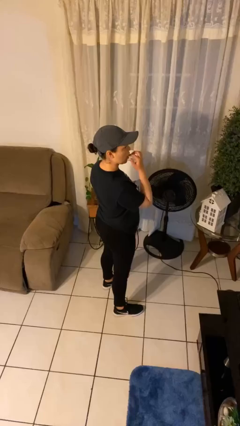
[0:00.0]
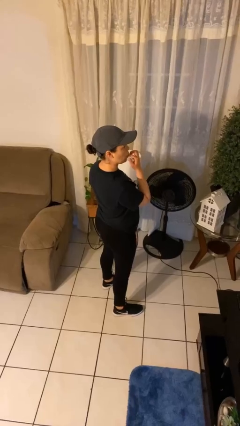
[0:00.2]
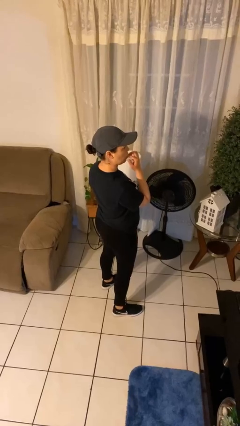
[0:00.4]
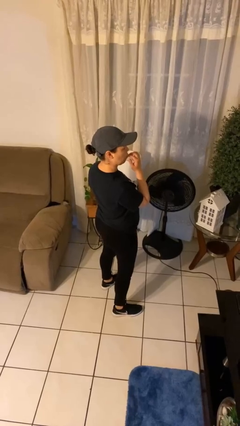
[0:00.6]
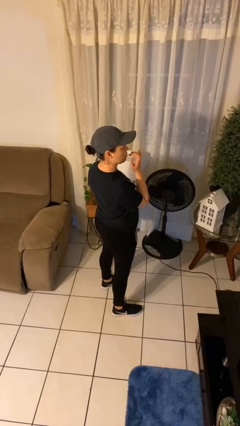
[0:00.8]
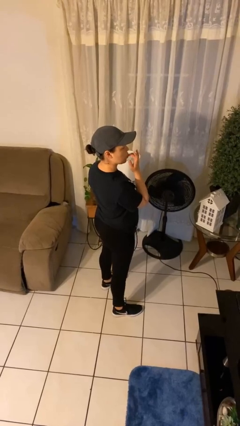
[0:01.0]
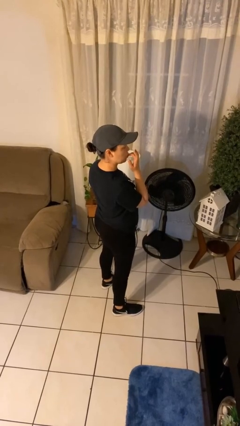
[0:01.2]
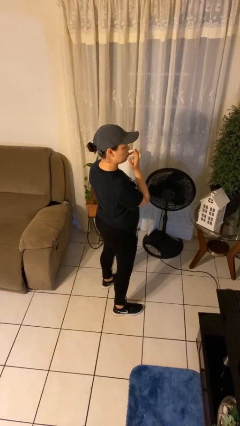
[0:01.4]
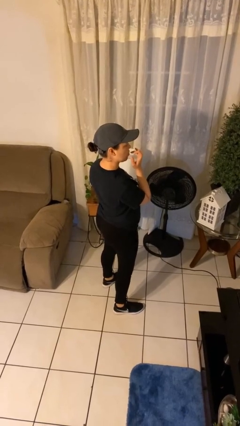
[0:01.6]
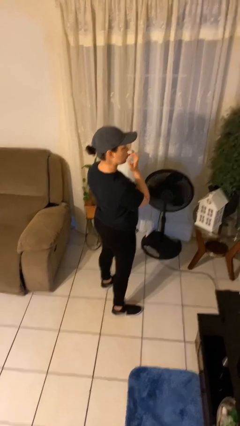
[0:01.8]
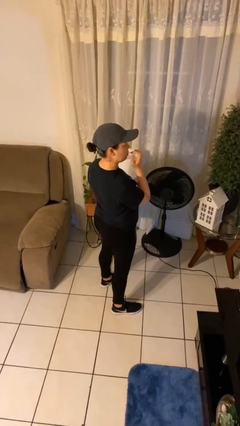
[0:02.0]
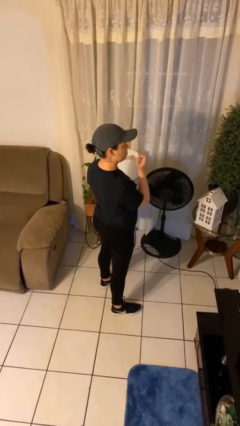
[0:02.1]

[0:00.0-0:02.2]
person licks fingers

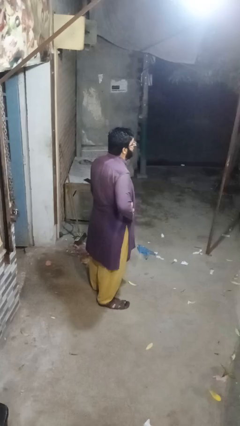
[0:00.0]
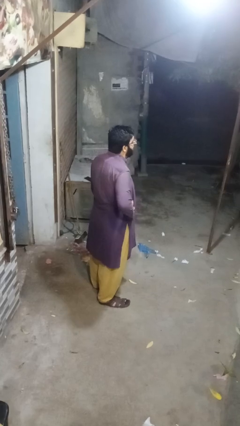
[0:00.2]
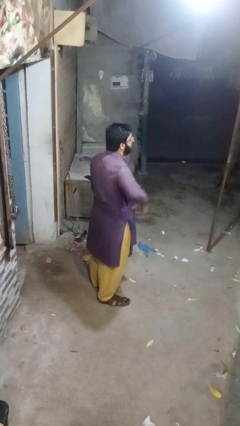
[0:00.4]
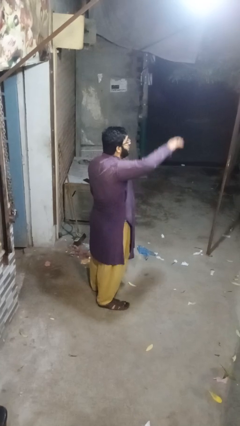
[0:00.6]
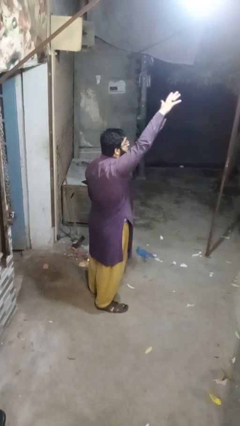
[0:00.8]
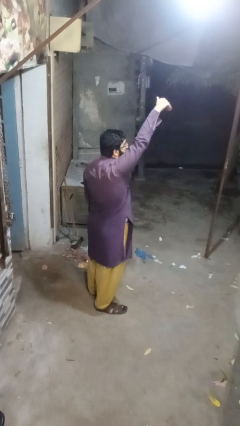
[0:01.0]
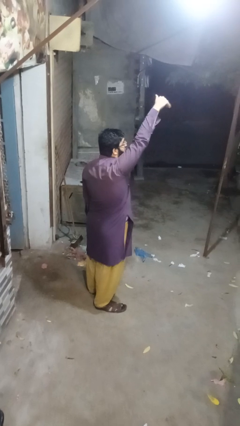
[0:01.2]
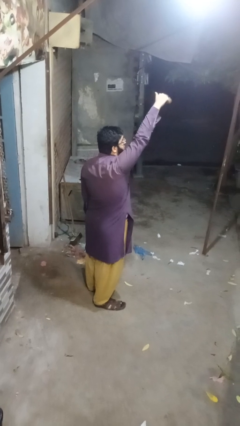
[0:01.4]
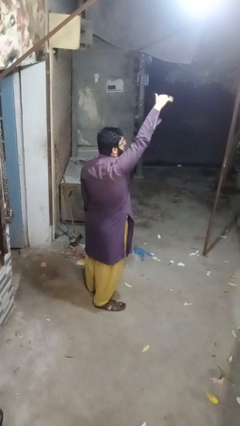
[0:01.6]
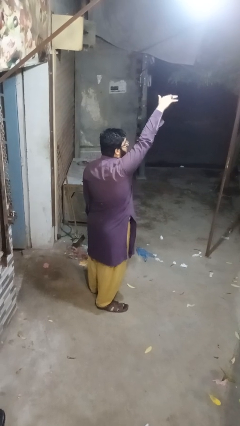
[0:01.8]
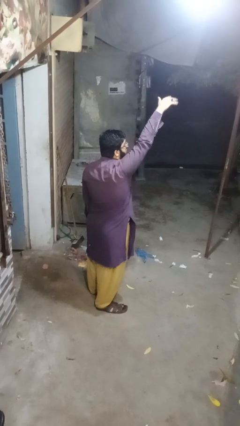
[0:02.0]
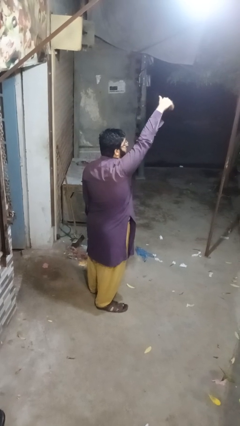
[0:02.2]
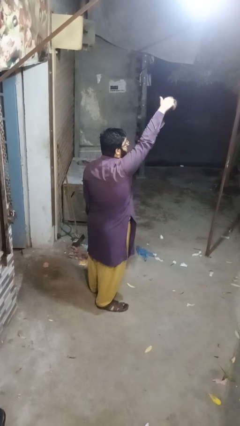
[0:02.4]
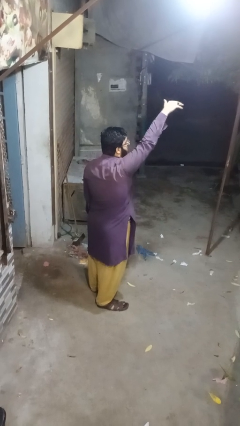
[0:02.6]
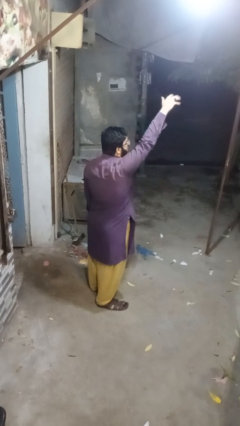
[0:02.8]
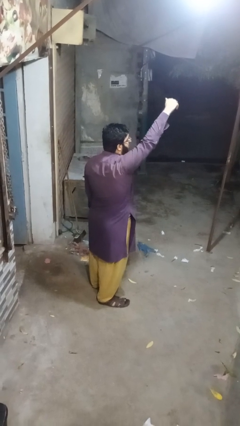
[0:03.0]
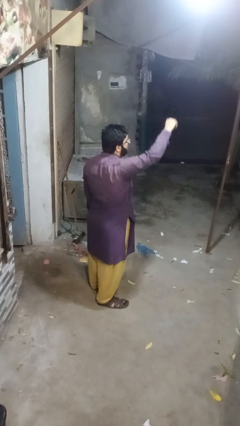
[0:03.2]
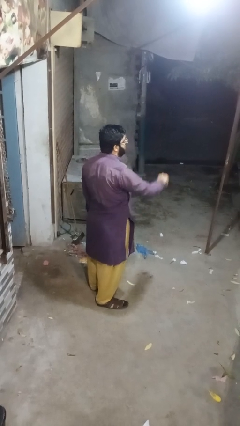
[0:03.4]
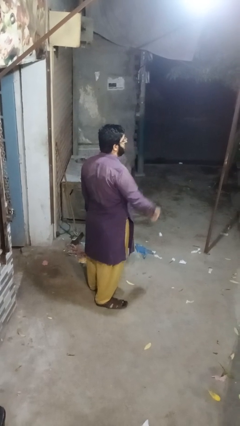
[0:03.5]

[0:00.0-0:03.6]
person gestures raise hand

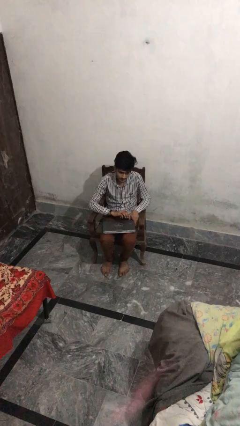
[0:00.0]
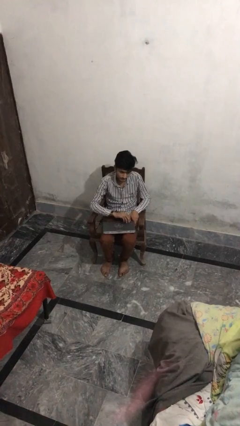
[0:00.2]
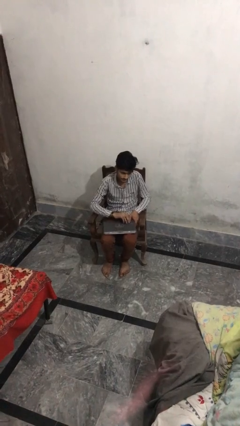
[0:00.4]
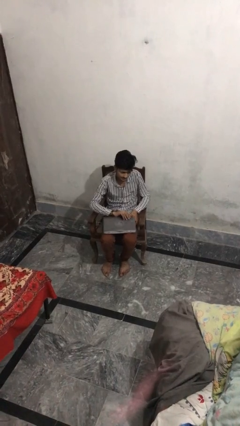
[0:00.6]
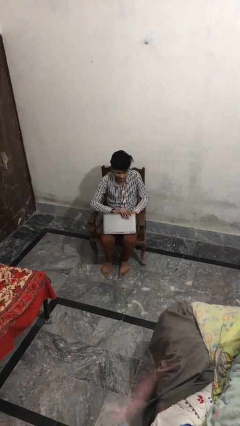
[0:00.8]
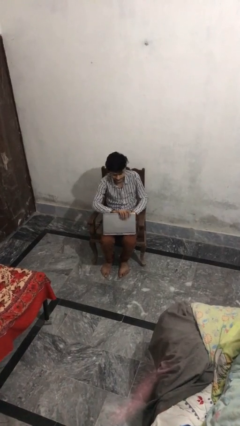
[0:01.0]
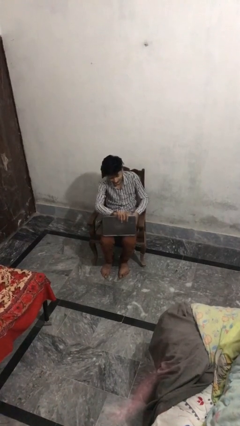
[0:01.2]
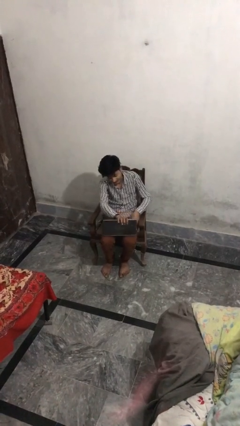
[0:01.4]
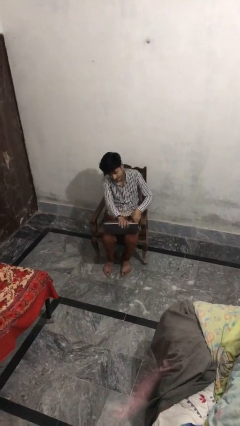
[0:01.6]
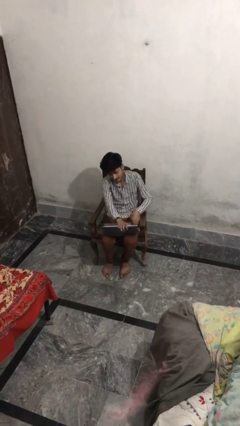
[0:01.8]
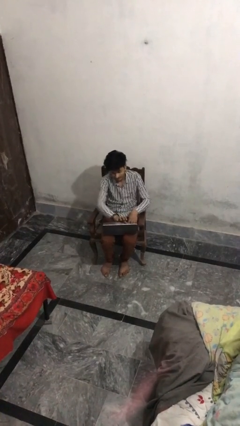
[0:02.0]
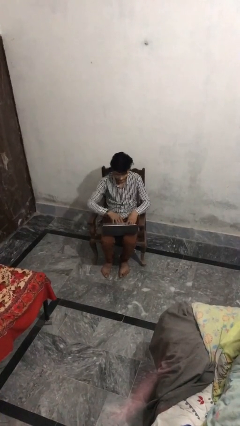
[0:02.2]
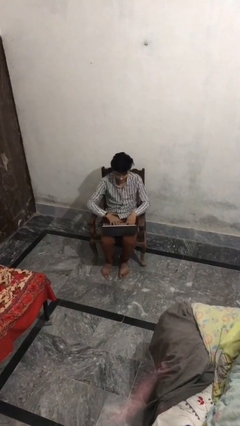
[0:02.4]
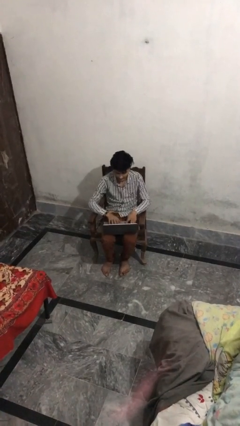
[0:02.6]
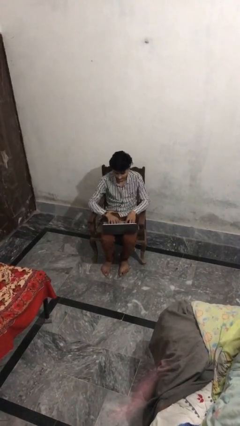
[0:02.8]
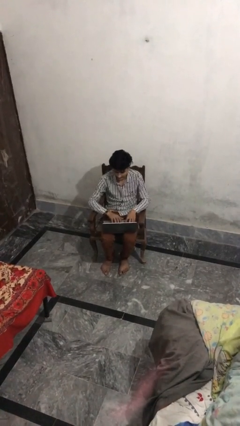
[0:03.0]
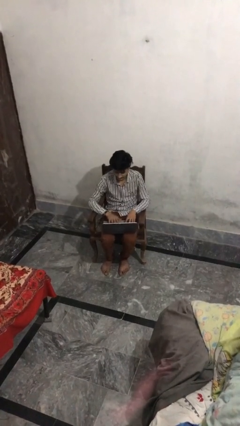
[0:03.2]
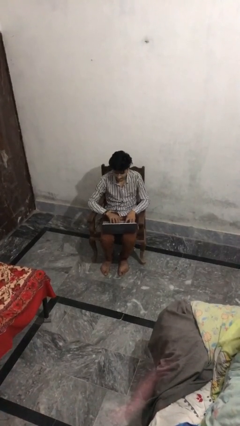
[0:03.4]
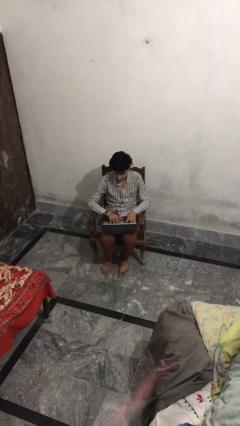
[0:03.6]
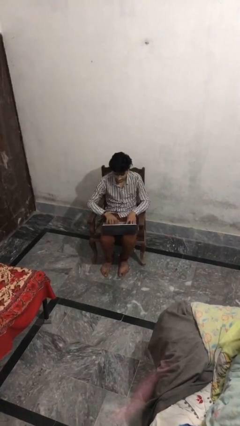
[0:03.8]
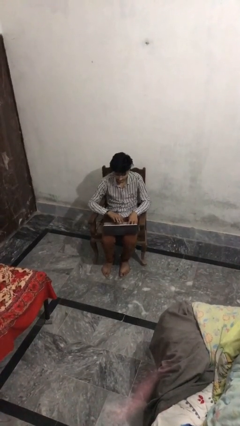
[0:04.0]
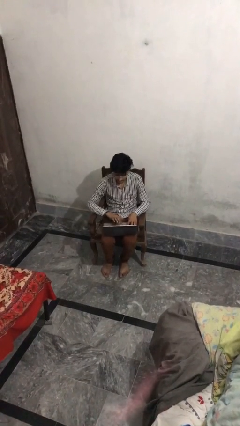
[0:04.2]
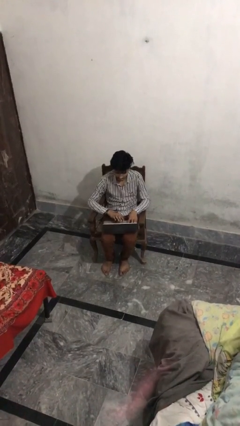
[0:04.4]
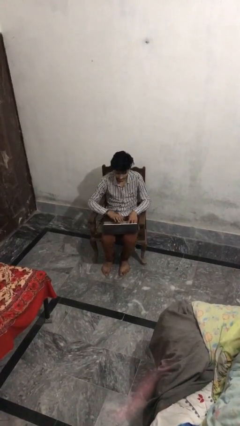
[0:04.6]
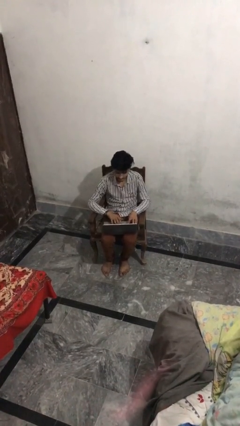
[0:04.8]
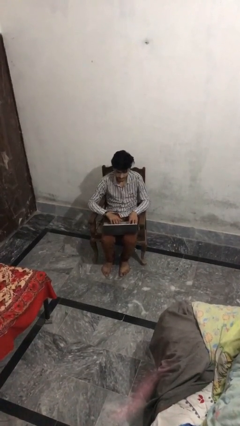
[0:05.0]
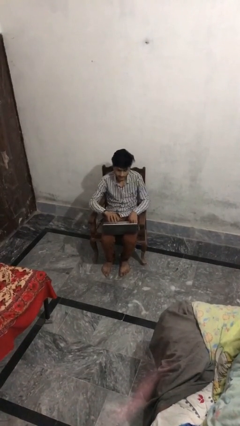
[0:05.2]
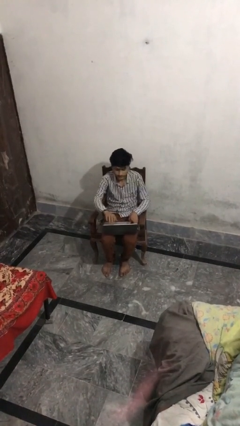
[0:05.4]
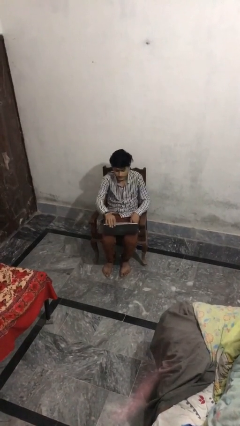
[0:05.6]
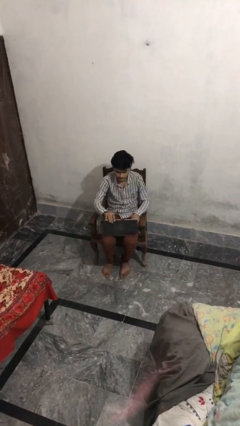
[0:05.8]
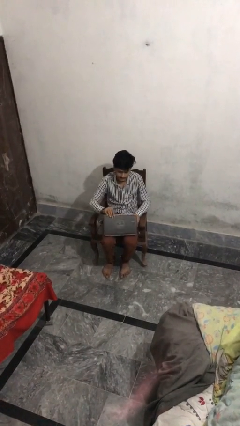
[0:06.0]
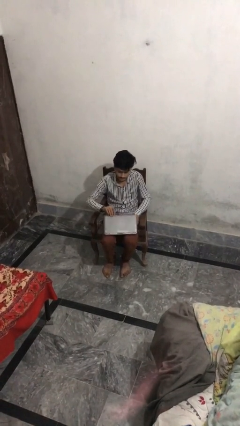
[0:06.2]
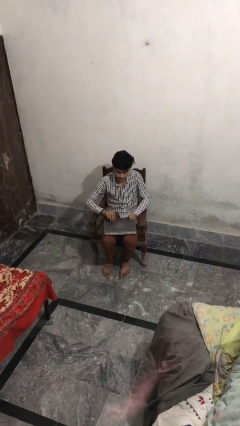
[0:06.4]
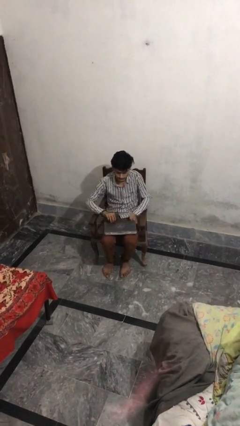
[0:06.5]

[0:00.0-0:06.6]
person interacts with laptop

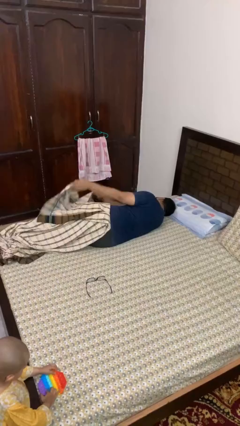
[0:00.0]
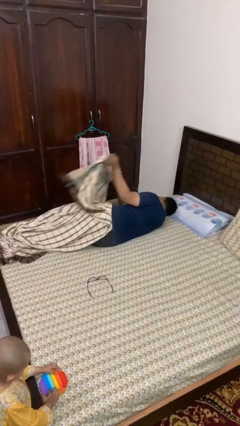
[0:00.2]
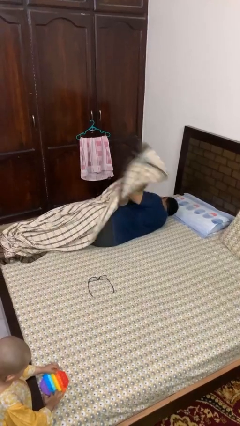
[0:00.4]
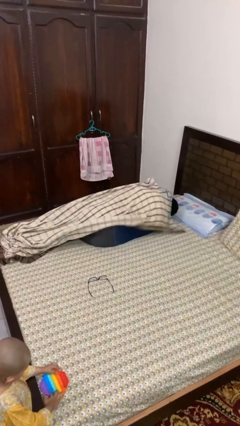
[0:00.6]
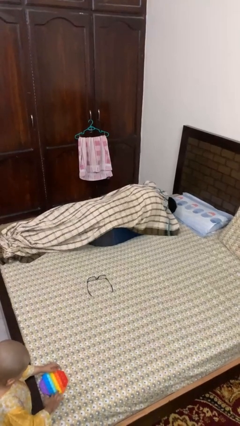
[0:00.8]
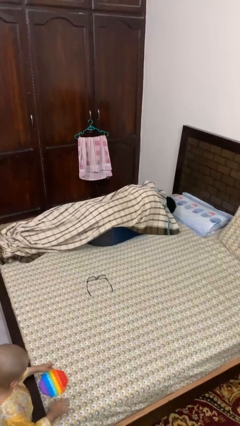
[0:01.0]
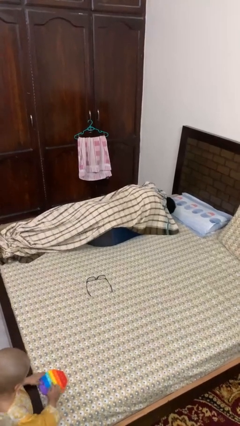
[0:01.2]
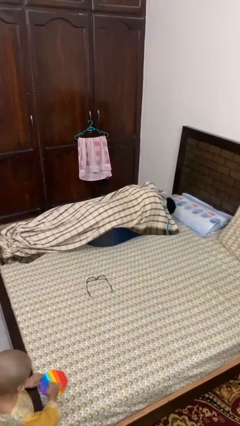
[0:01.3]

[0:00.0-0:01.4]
person covers with blanket

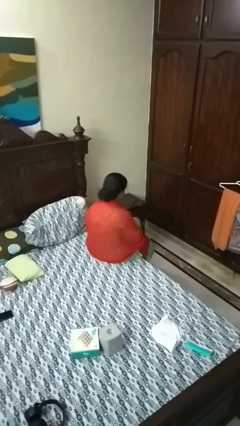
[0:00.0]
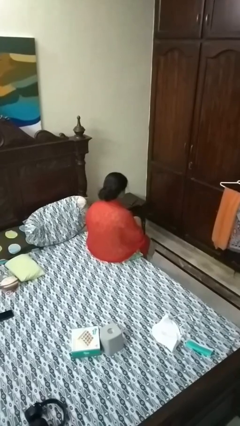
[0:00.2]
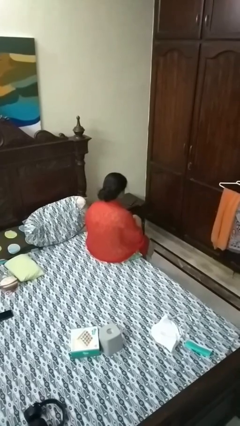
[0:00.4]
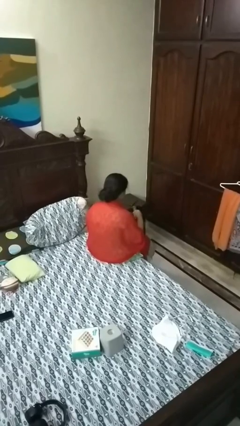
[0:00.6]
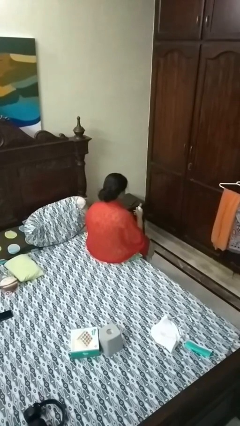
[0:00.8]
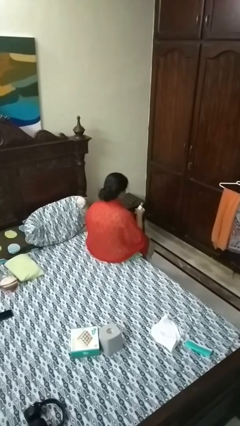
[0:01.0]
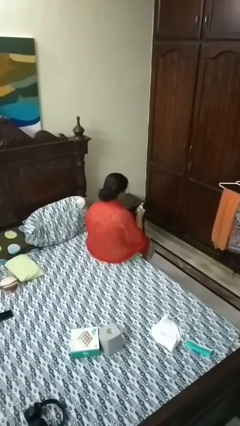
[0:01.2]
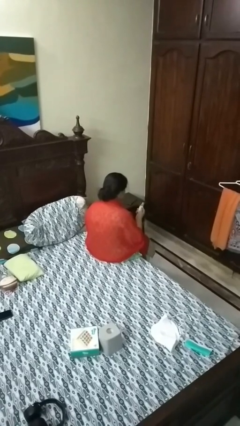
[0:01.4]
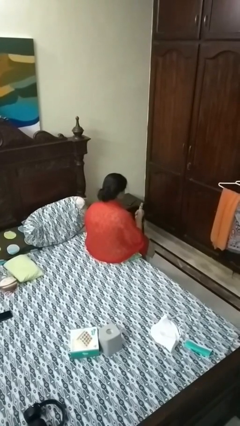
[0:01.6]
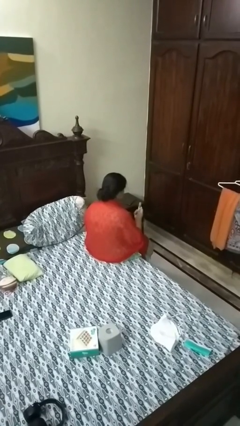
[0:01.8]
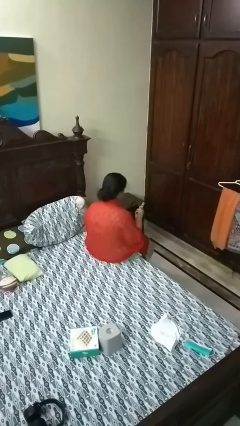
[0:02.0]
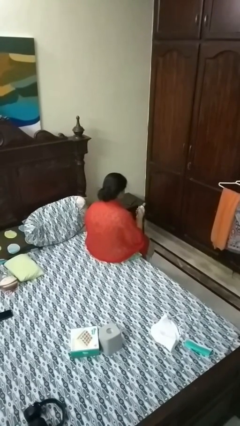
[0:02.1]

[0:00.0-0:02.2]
person takes object from purse

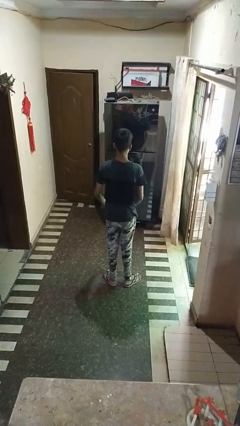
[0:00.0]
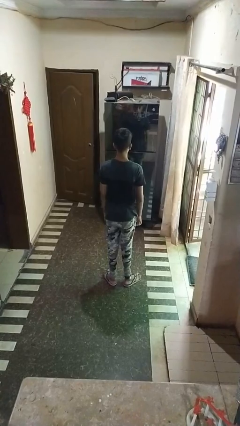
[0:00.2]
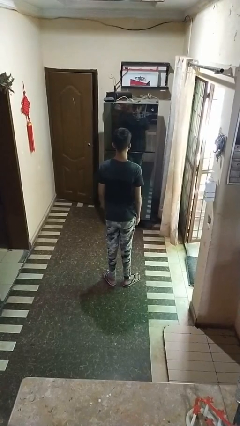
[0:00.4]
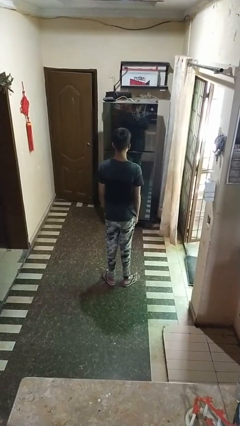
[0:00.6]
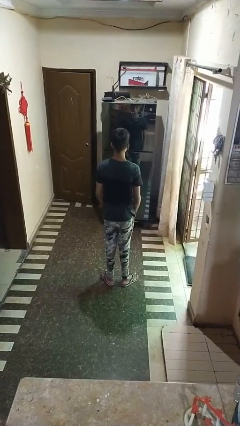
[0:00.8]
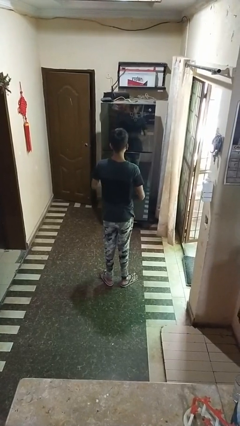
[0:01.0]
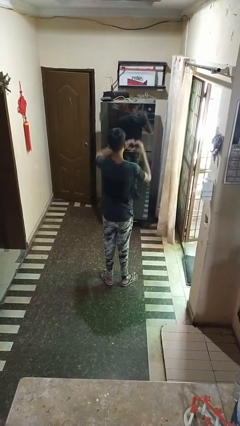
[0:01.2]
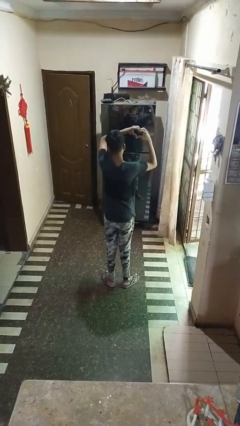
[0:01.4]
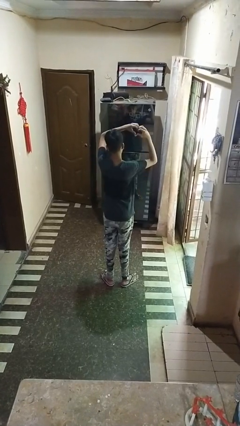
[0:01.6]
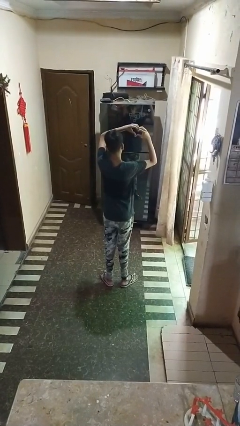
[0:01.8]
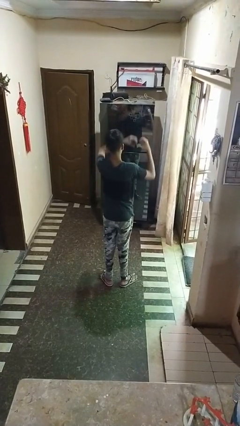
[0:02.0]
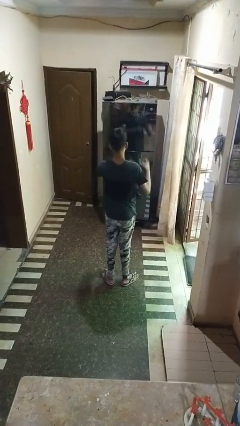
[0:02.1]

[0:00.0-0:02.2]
person gestures heart
